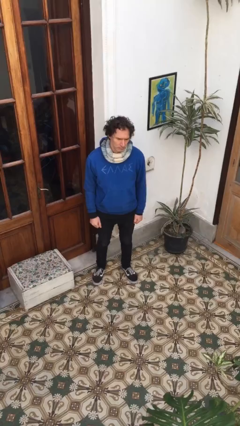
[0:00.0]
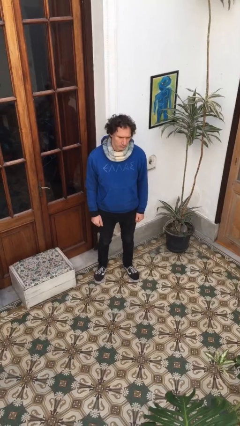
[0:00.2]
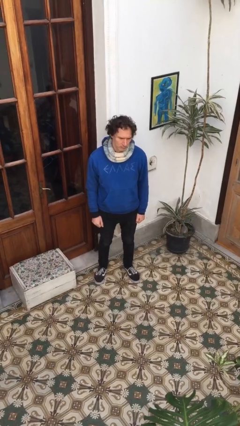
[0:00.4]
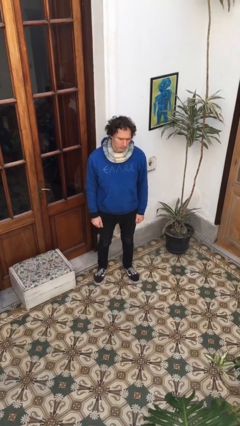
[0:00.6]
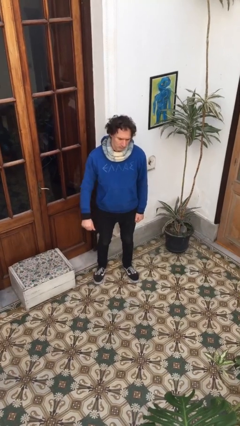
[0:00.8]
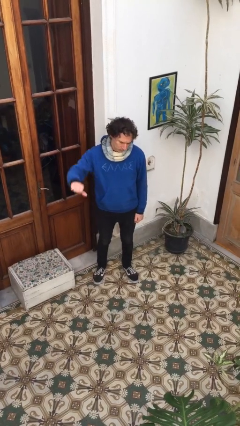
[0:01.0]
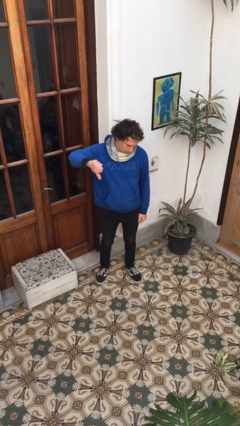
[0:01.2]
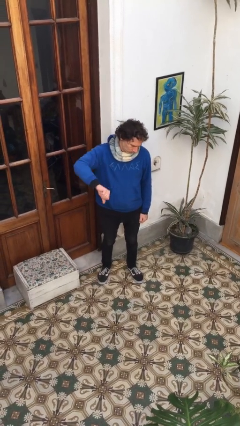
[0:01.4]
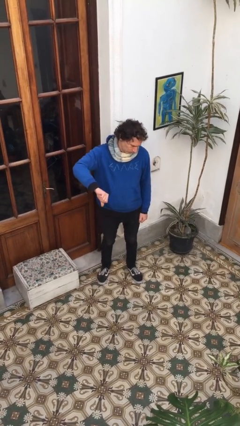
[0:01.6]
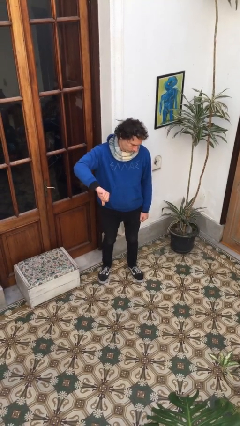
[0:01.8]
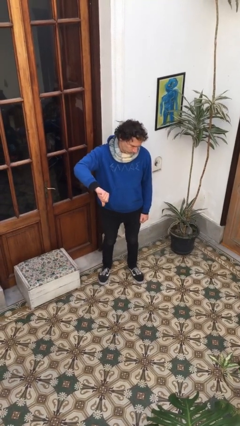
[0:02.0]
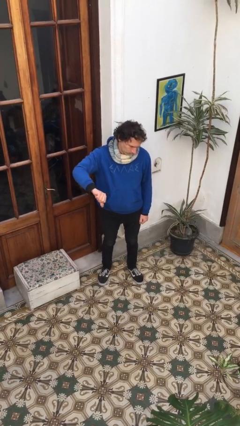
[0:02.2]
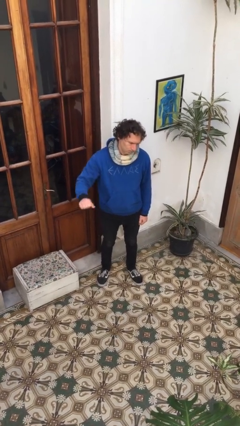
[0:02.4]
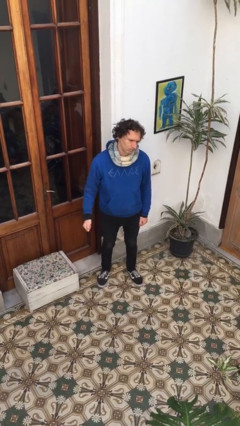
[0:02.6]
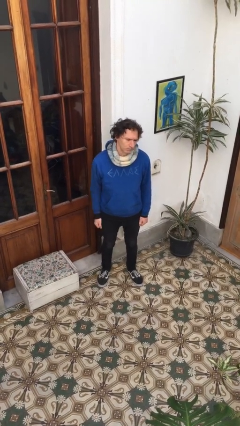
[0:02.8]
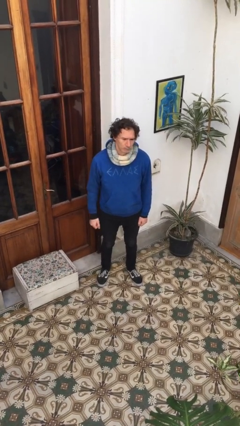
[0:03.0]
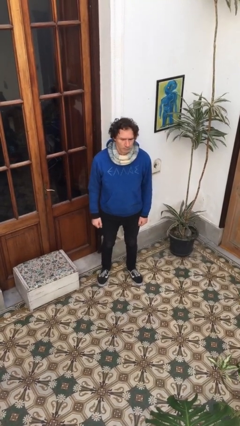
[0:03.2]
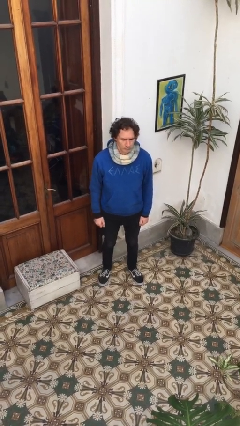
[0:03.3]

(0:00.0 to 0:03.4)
person gestures thumbs down

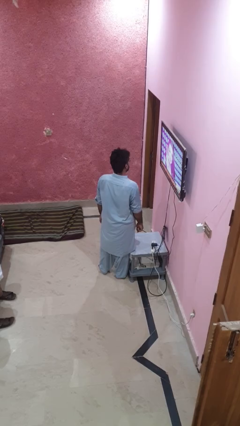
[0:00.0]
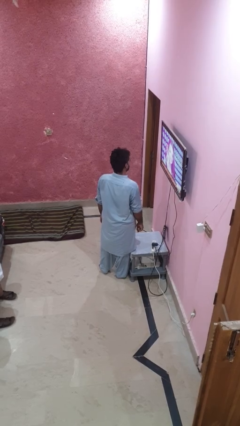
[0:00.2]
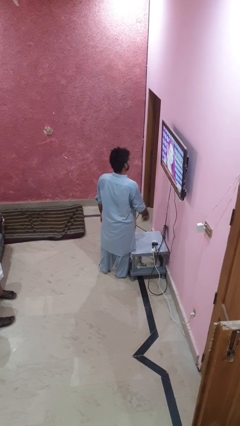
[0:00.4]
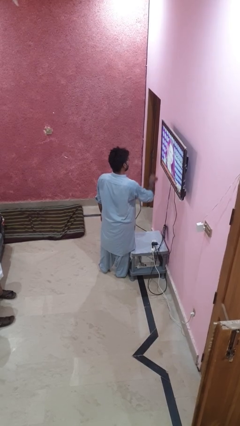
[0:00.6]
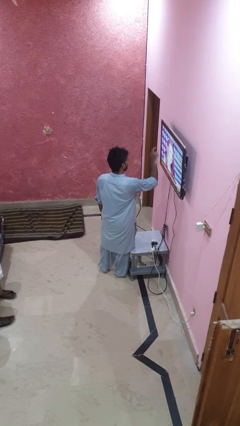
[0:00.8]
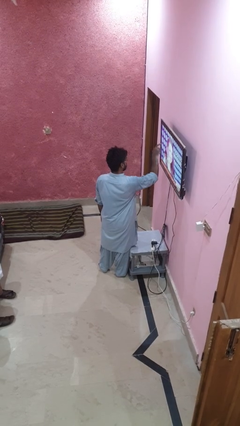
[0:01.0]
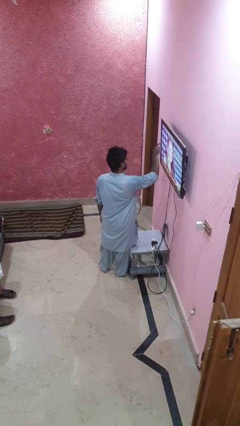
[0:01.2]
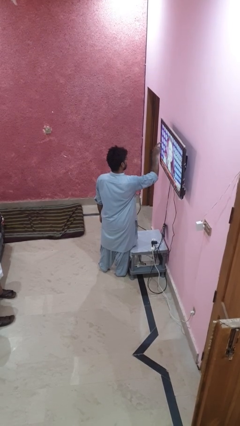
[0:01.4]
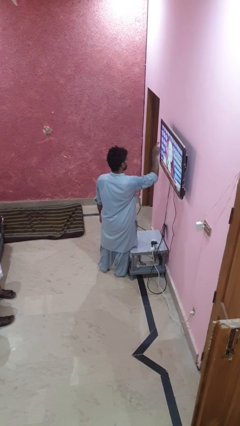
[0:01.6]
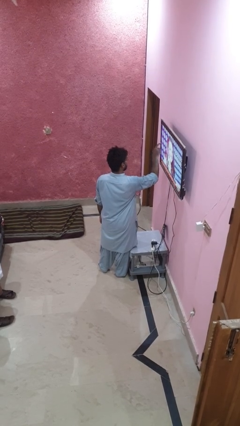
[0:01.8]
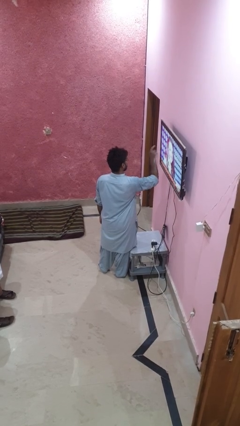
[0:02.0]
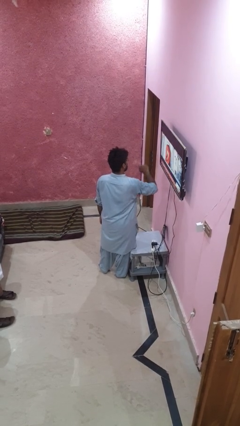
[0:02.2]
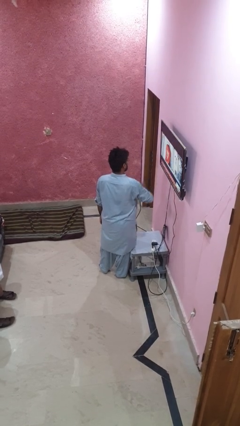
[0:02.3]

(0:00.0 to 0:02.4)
person taps object with finger

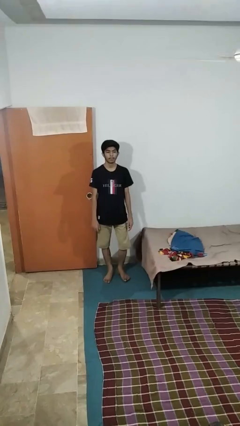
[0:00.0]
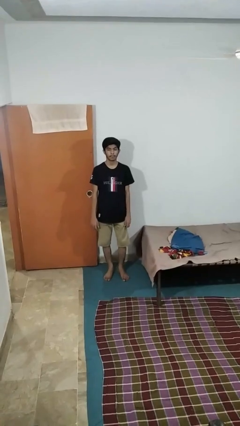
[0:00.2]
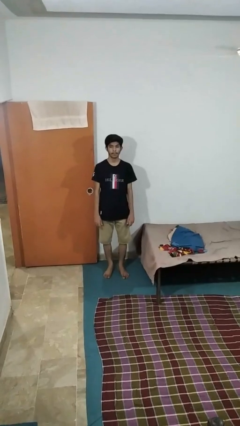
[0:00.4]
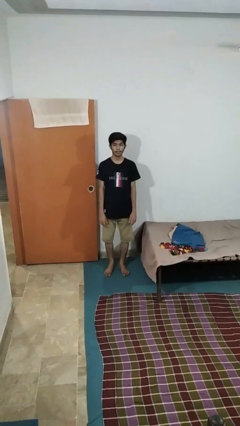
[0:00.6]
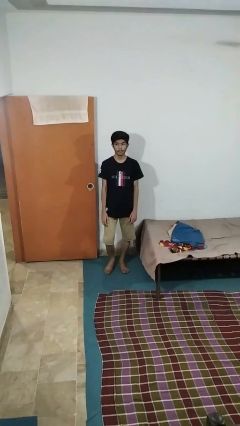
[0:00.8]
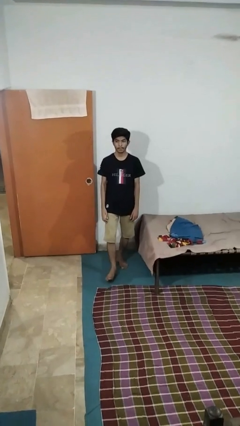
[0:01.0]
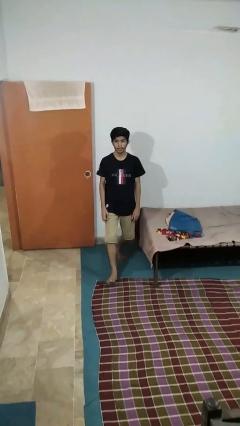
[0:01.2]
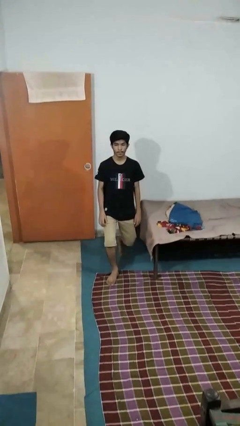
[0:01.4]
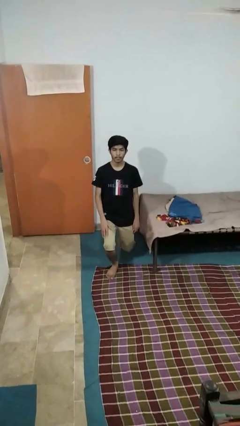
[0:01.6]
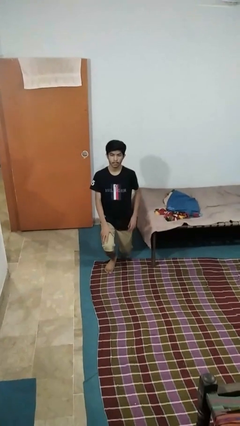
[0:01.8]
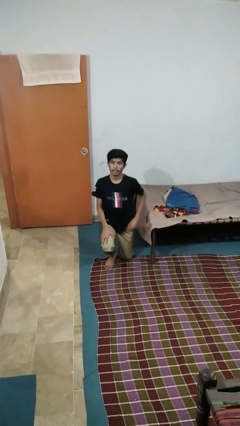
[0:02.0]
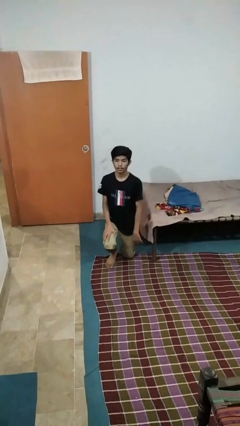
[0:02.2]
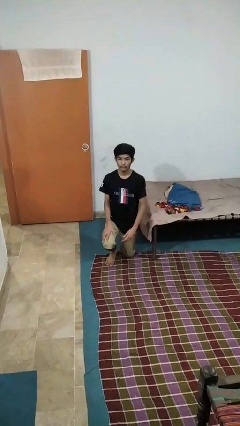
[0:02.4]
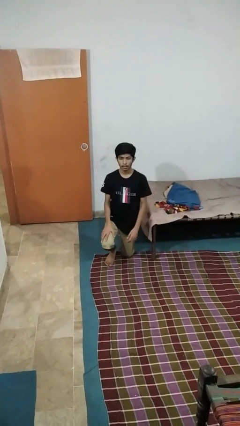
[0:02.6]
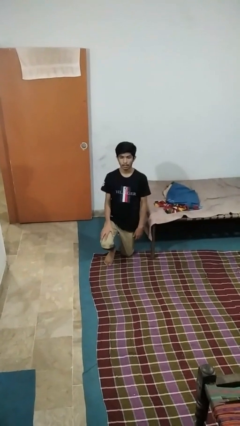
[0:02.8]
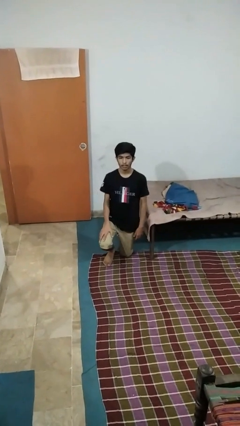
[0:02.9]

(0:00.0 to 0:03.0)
person kneels

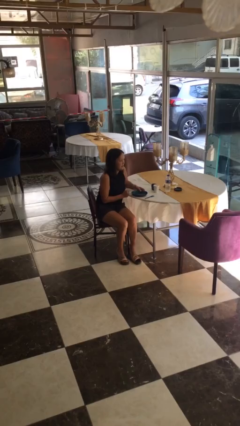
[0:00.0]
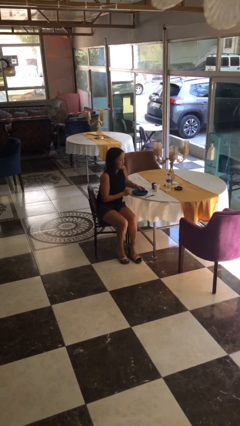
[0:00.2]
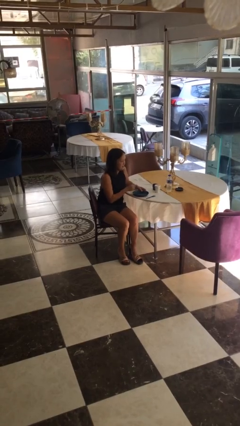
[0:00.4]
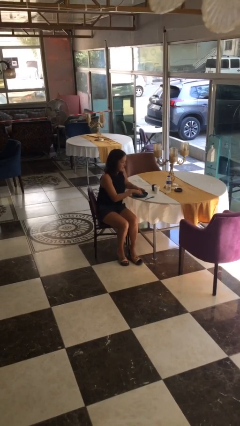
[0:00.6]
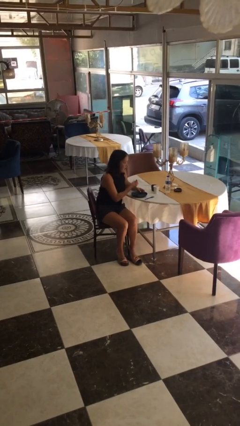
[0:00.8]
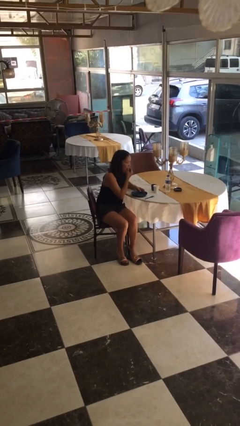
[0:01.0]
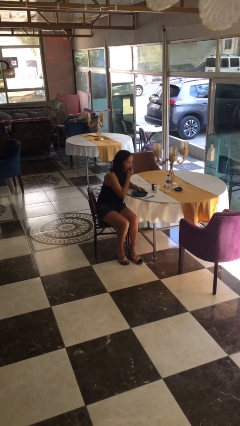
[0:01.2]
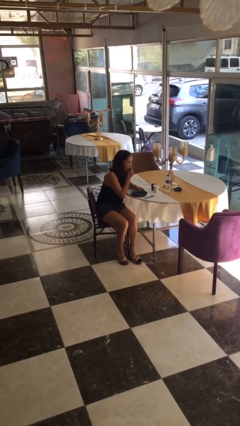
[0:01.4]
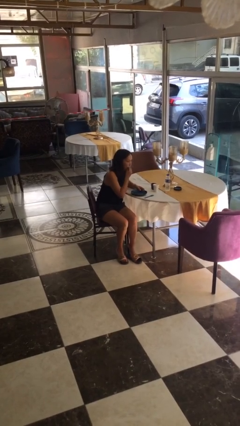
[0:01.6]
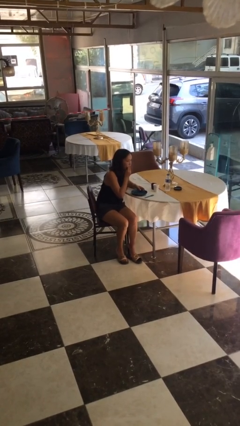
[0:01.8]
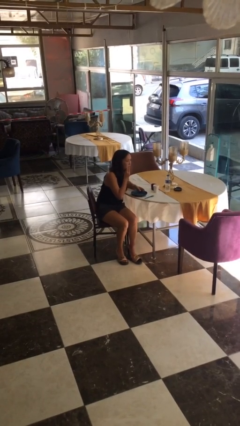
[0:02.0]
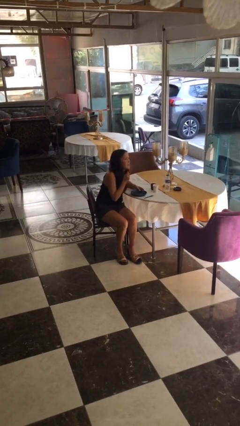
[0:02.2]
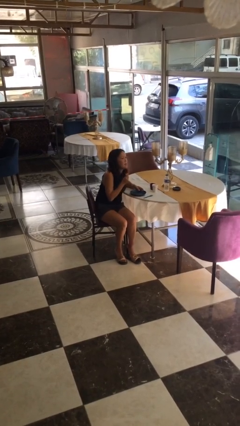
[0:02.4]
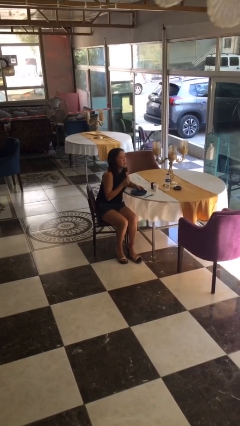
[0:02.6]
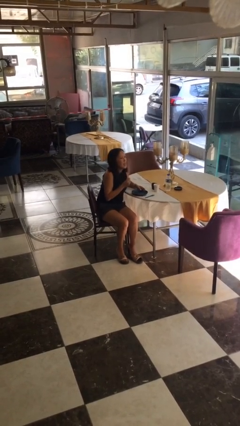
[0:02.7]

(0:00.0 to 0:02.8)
person eats with hands

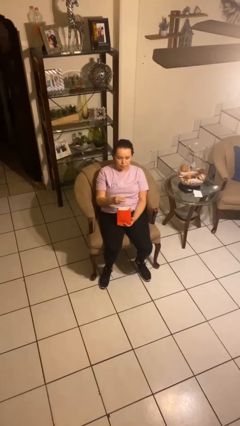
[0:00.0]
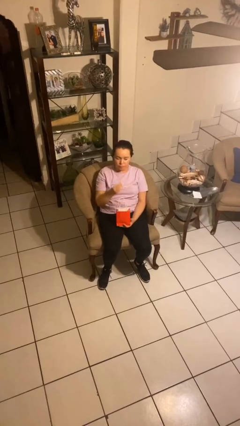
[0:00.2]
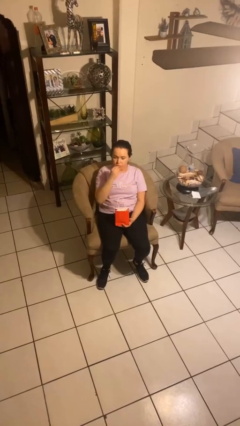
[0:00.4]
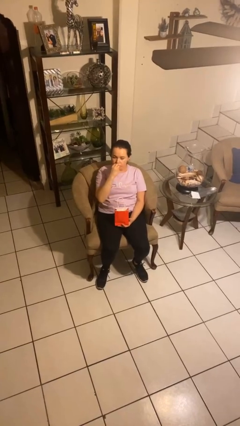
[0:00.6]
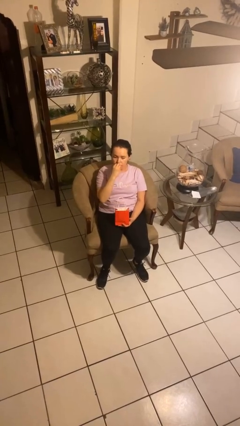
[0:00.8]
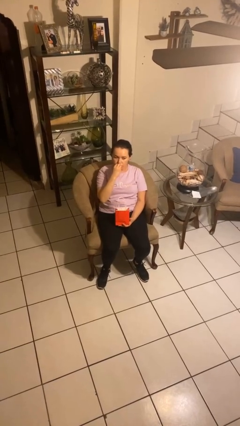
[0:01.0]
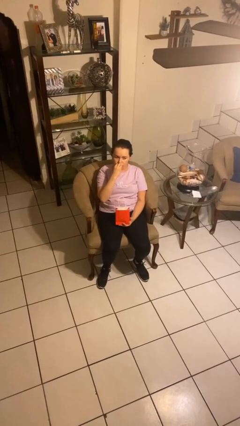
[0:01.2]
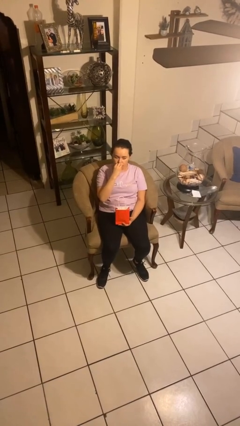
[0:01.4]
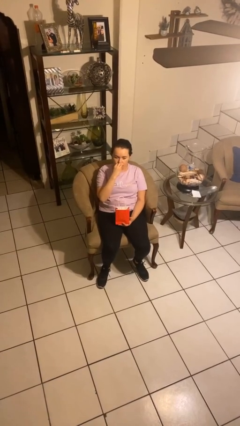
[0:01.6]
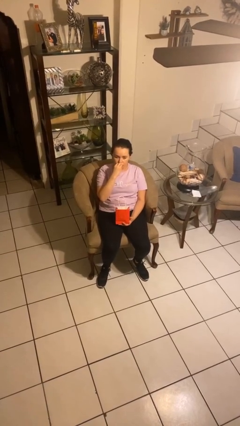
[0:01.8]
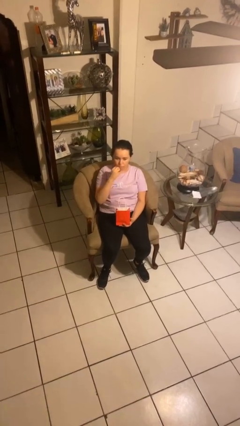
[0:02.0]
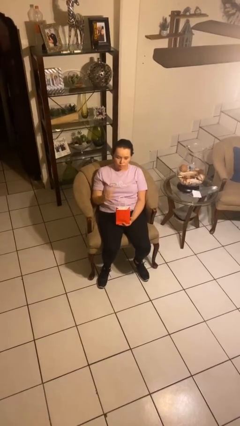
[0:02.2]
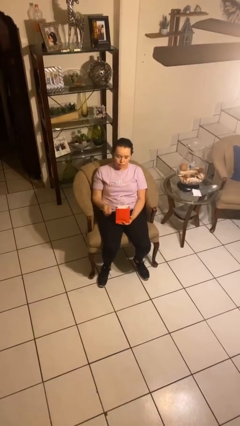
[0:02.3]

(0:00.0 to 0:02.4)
person eats snack from bag

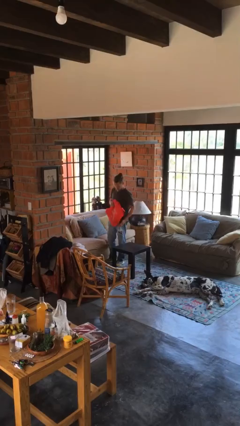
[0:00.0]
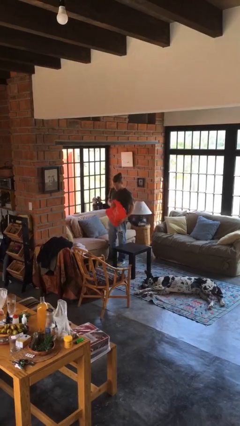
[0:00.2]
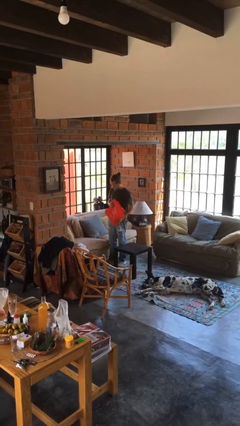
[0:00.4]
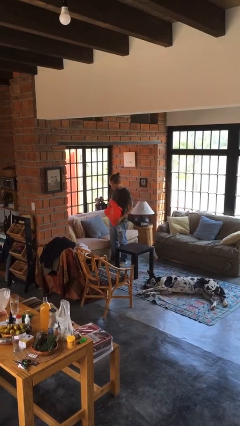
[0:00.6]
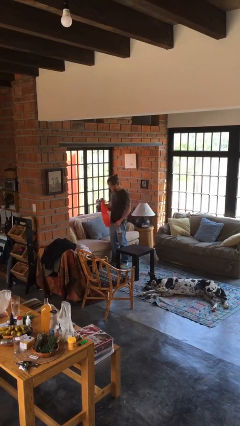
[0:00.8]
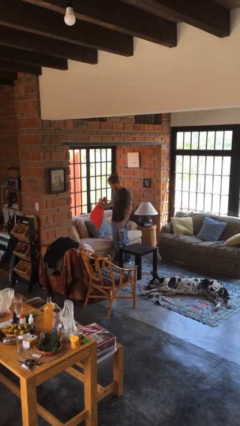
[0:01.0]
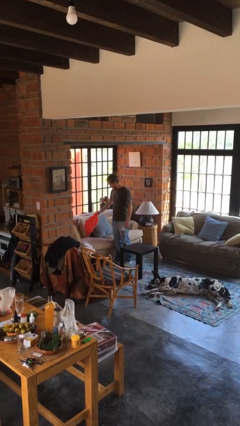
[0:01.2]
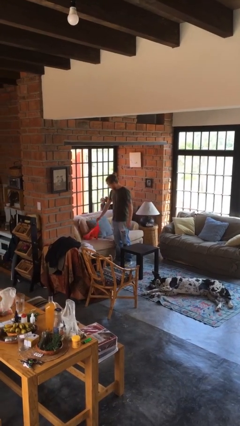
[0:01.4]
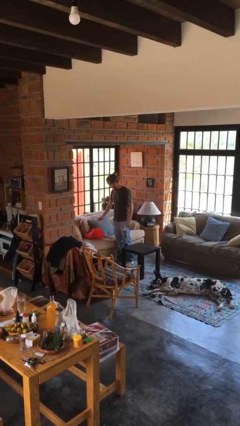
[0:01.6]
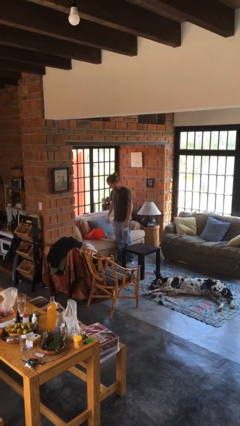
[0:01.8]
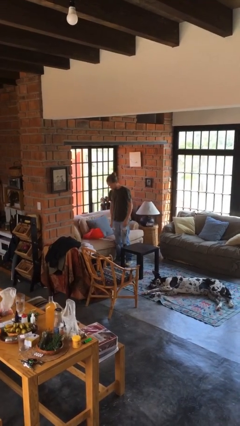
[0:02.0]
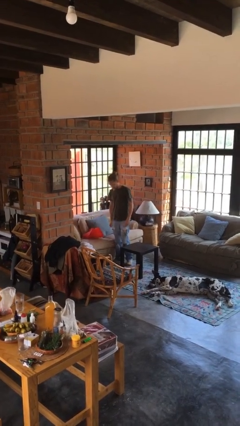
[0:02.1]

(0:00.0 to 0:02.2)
person puts down object on couch

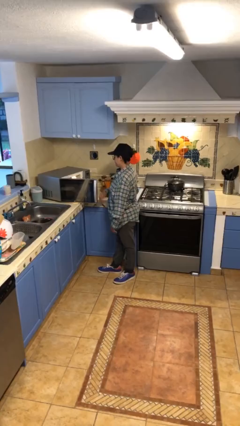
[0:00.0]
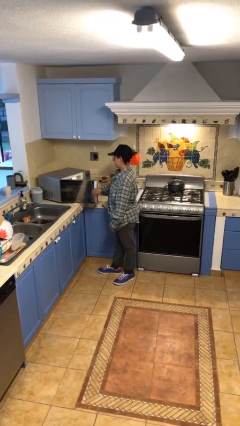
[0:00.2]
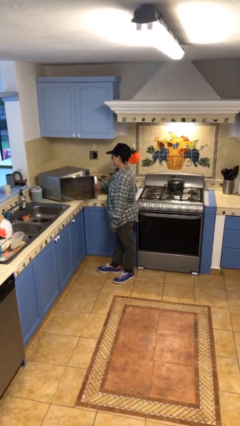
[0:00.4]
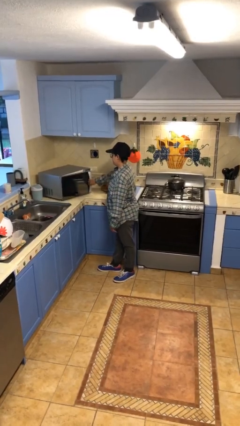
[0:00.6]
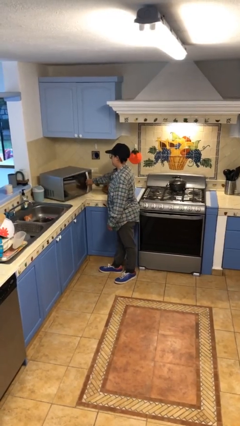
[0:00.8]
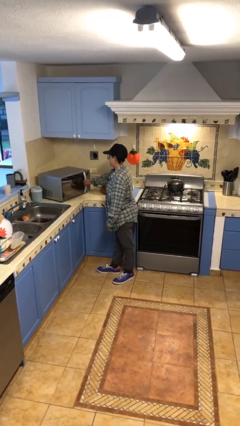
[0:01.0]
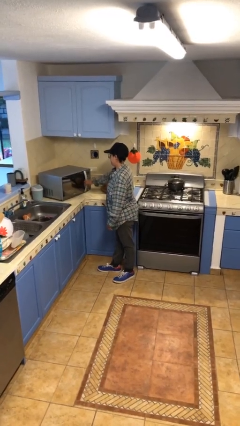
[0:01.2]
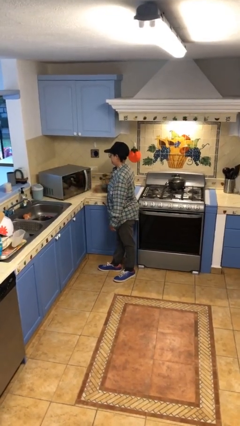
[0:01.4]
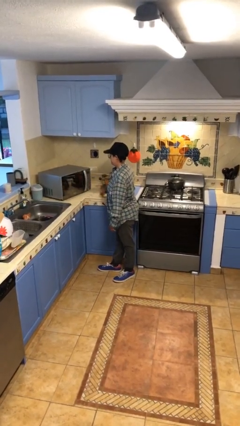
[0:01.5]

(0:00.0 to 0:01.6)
person closes microwave
